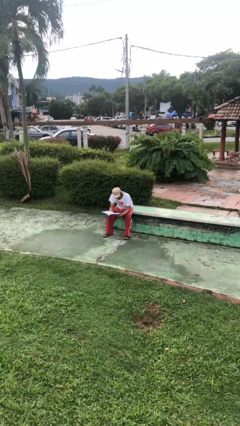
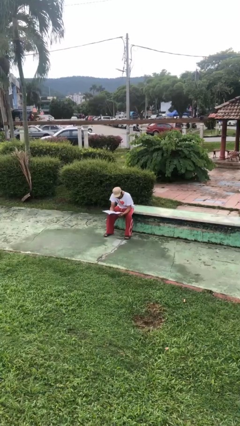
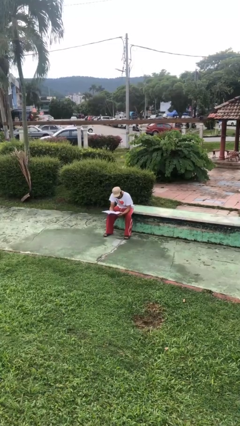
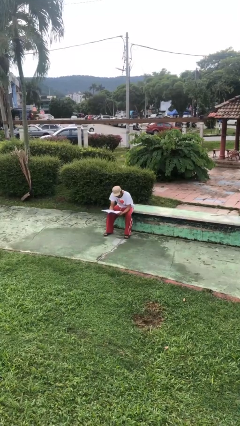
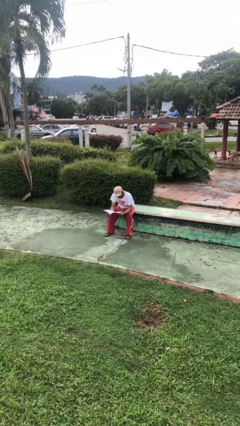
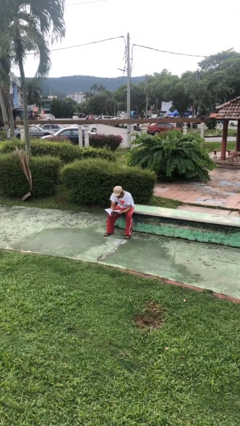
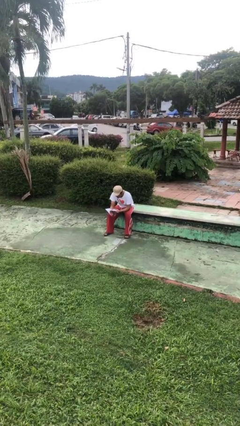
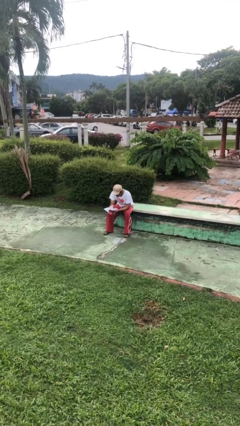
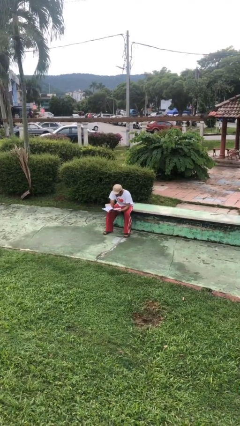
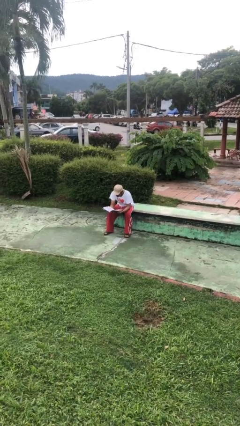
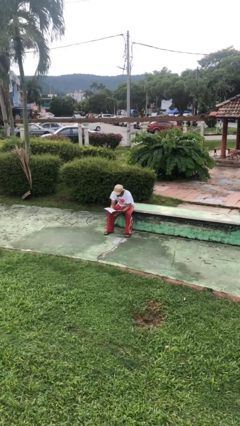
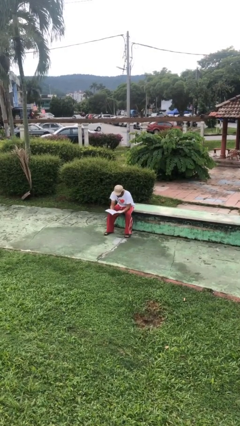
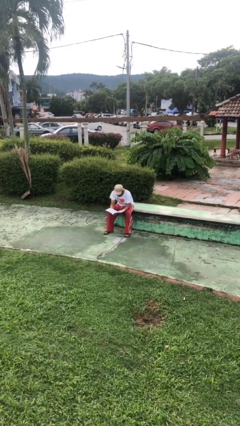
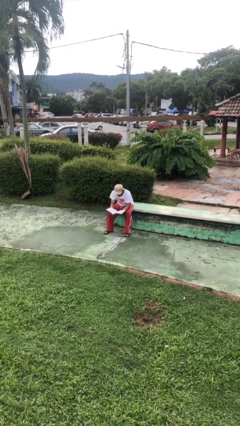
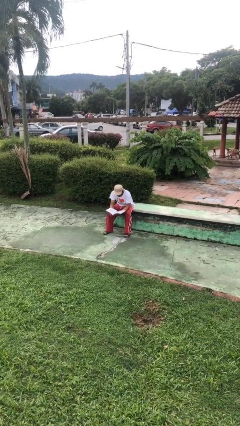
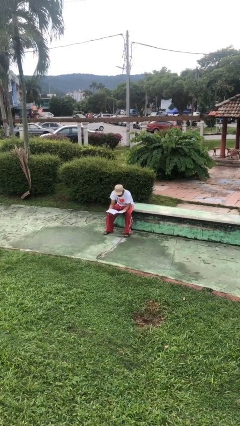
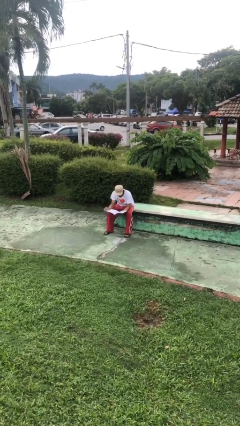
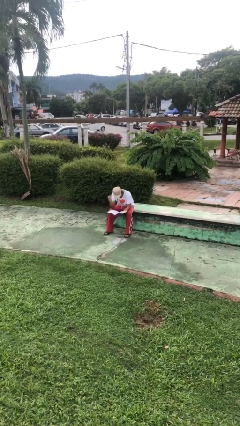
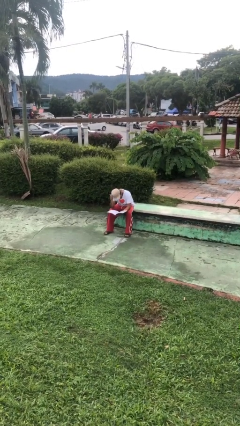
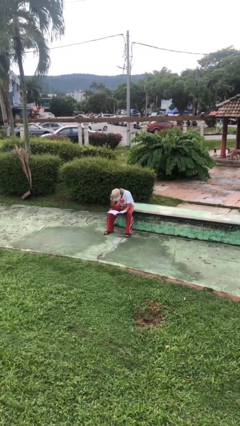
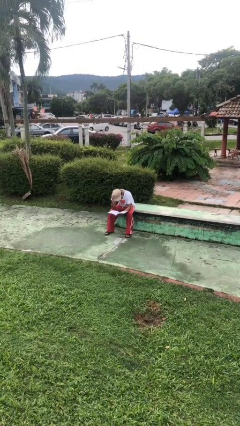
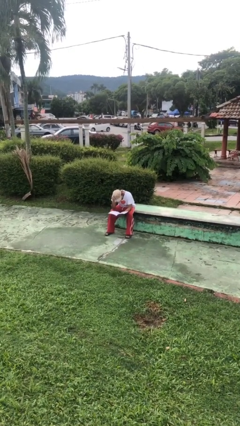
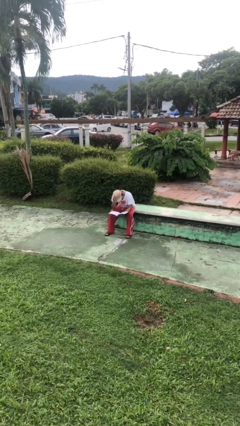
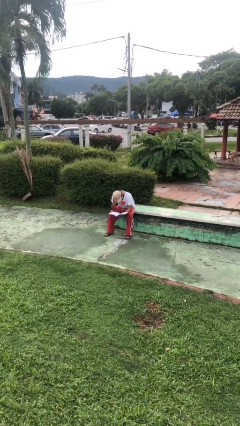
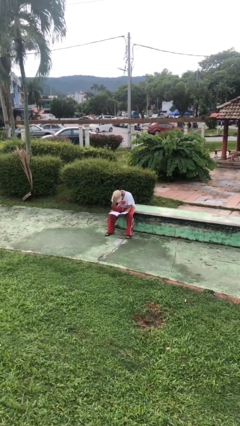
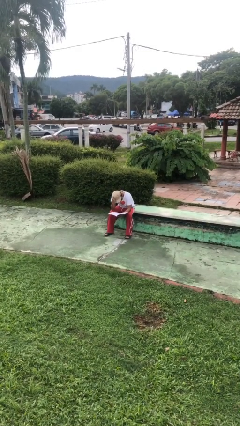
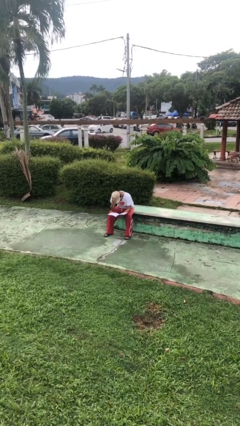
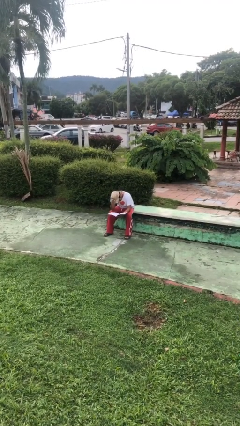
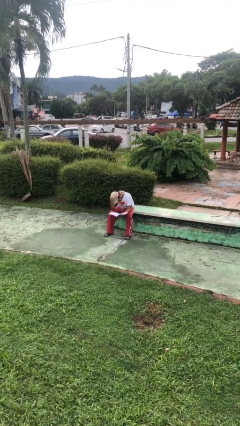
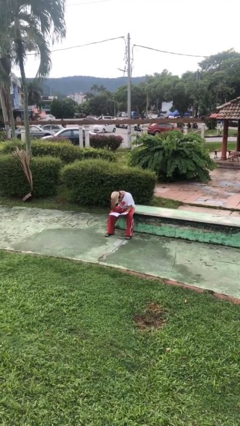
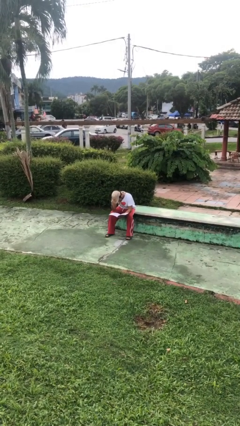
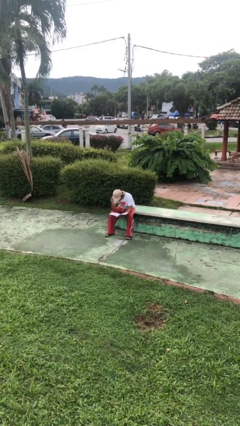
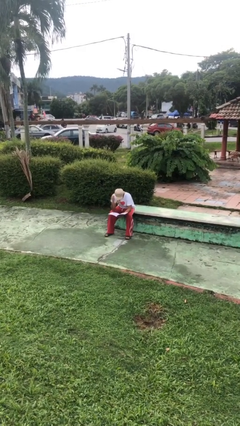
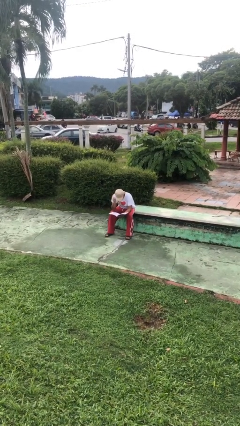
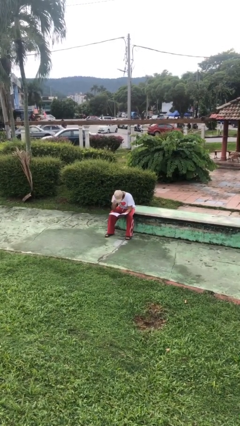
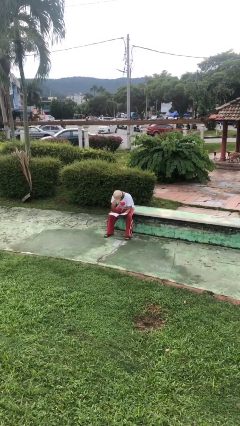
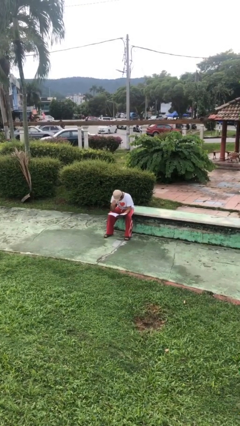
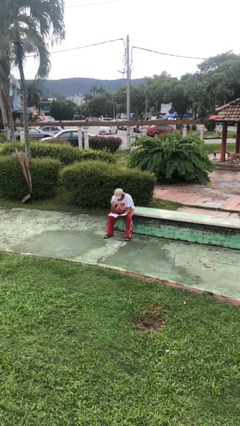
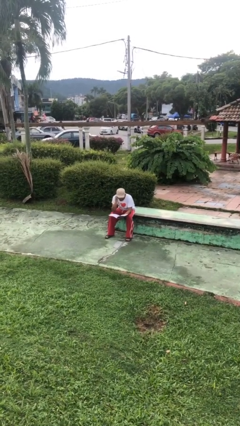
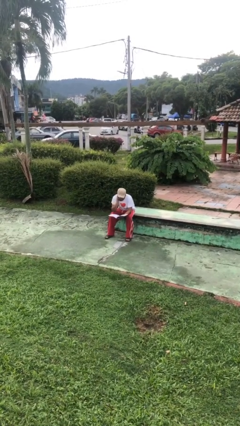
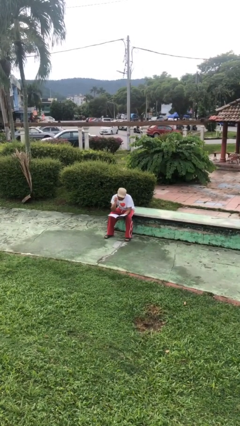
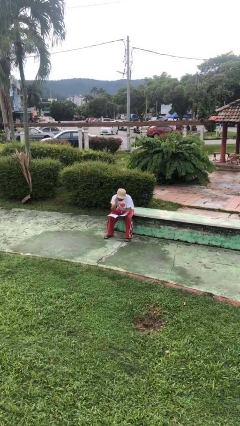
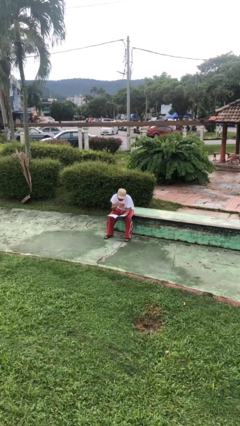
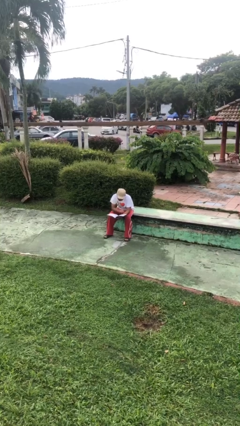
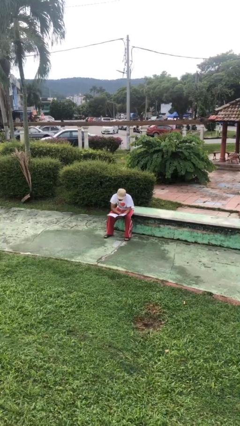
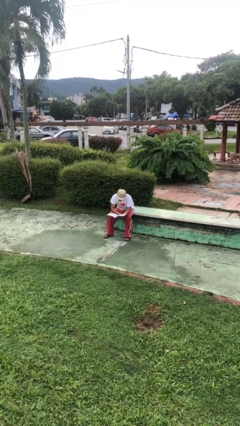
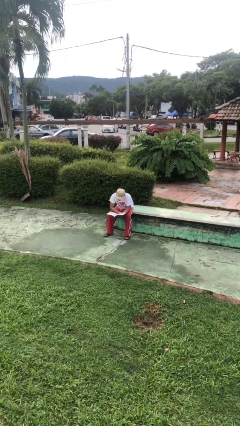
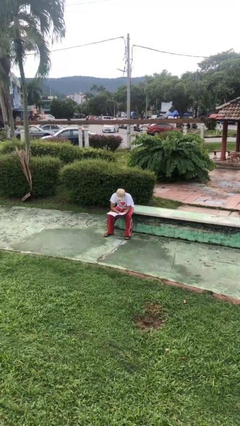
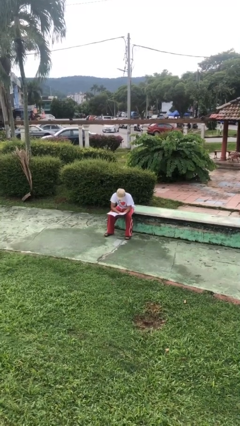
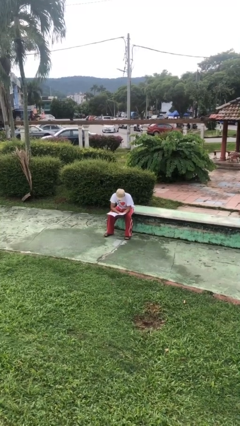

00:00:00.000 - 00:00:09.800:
person reads document

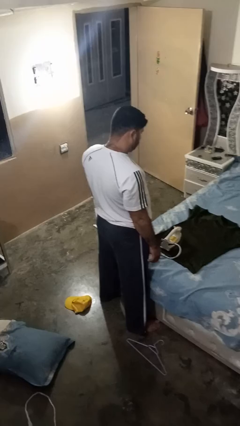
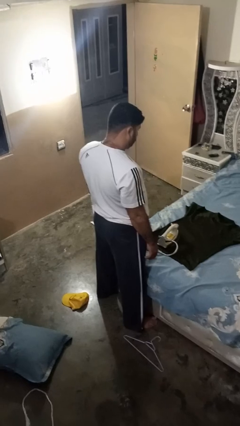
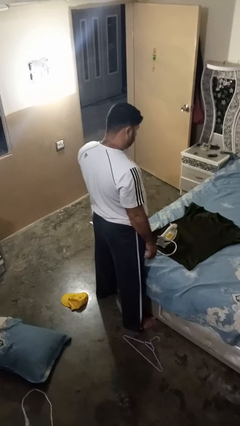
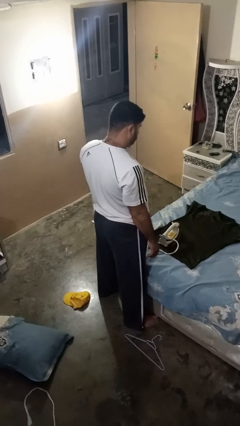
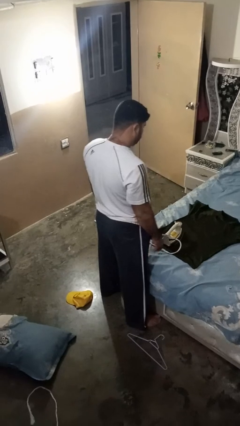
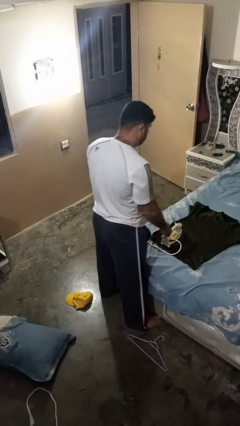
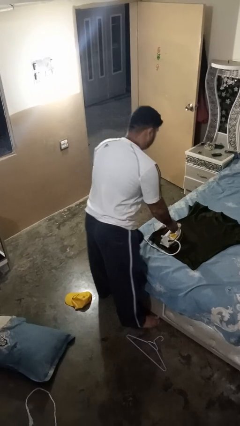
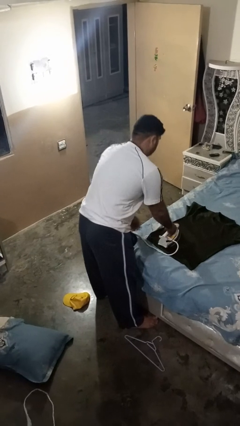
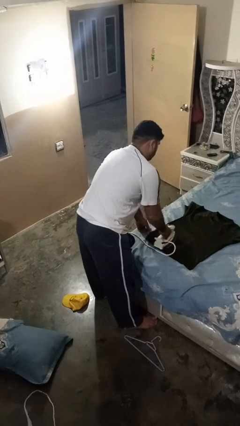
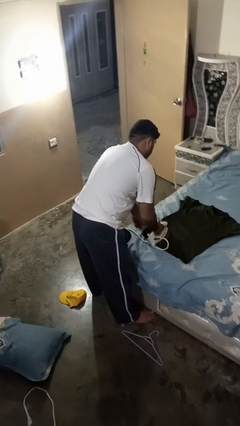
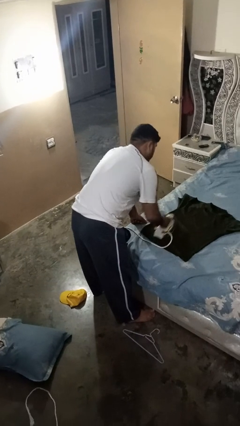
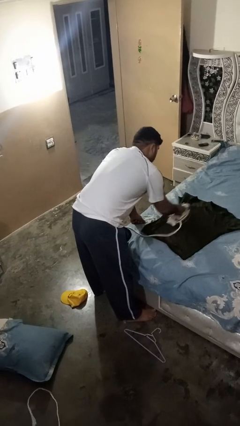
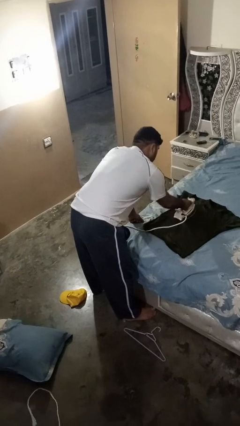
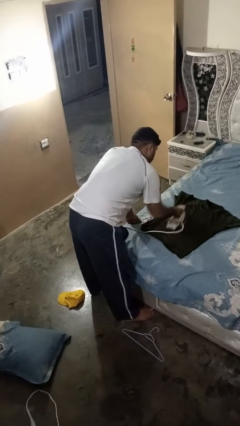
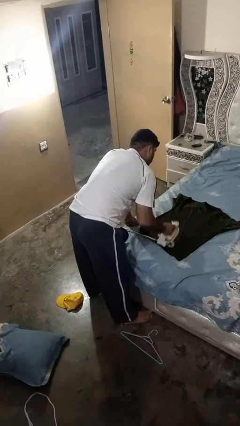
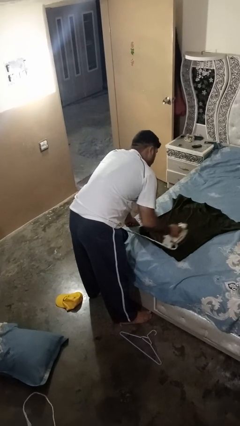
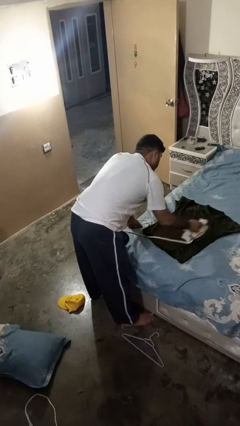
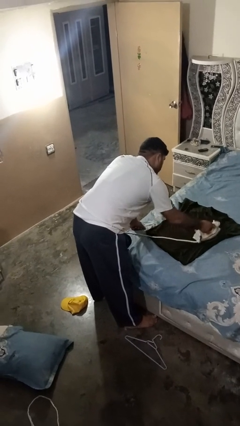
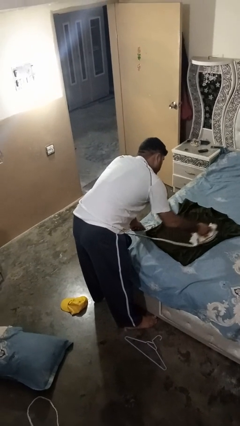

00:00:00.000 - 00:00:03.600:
person irons clothes

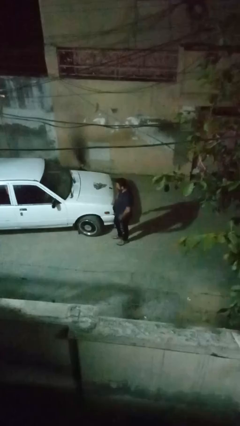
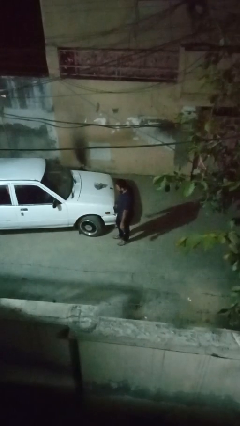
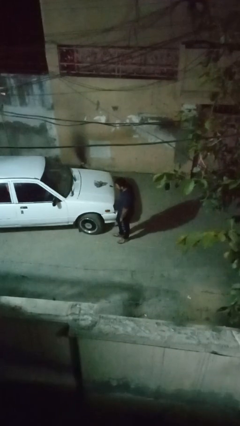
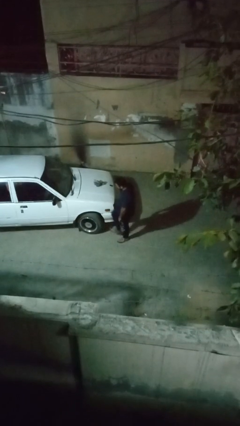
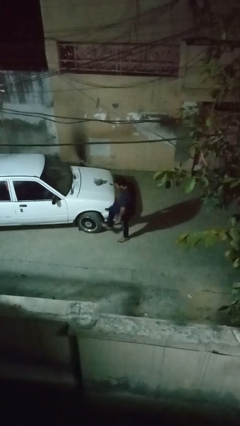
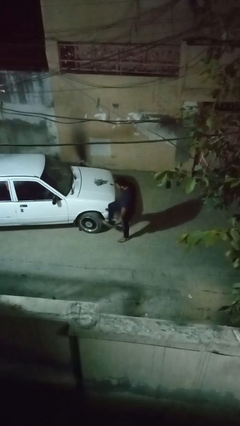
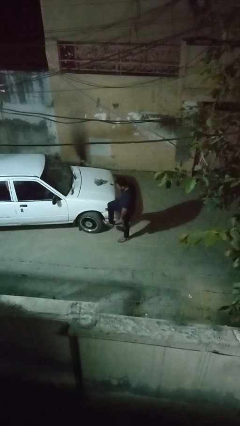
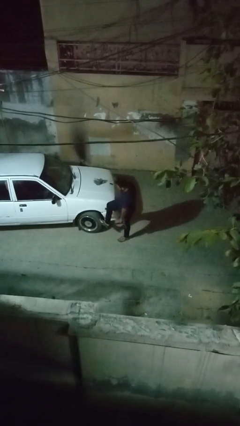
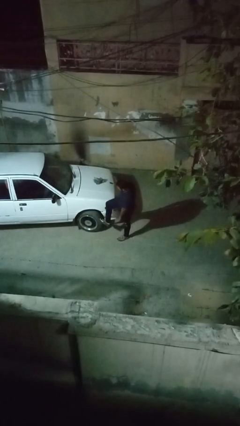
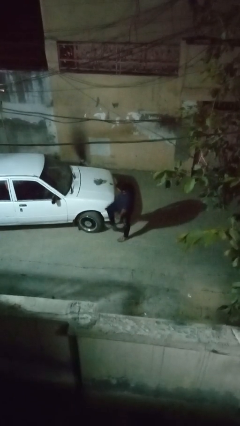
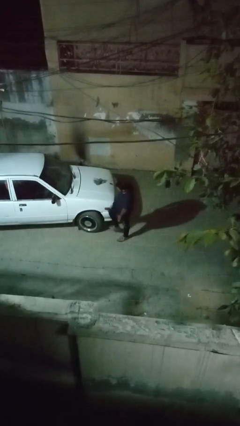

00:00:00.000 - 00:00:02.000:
person kicks car tires

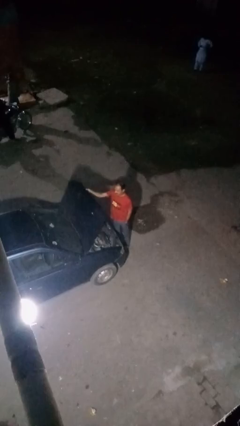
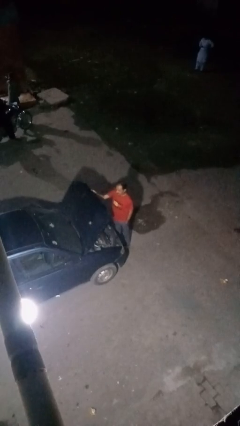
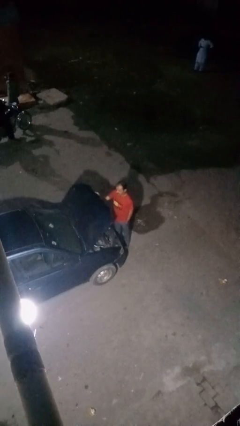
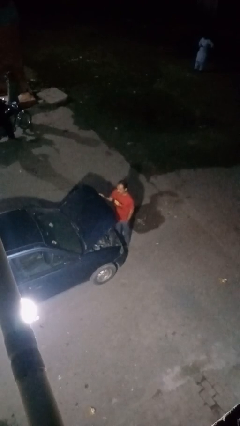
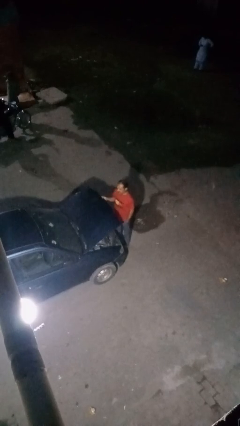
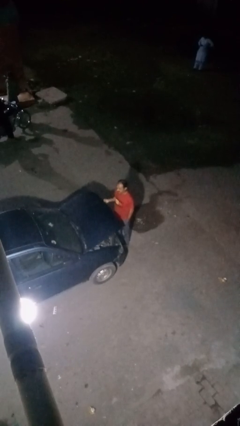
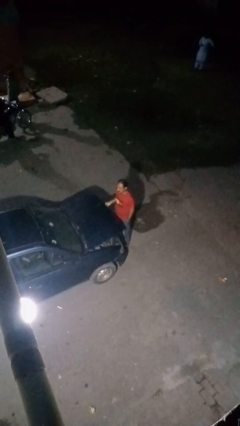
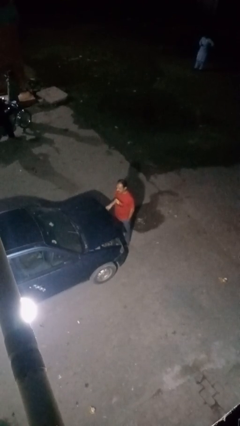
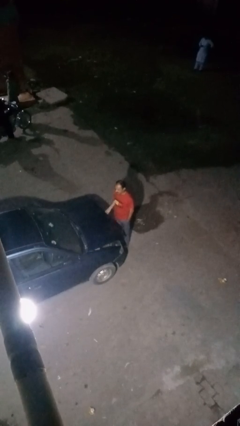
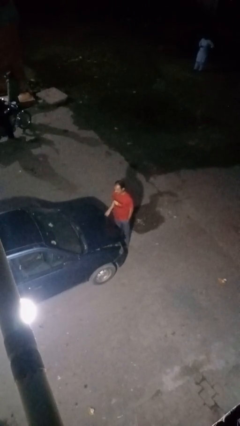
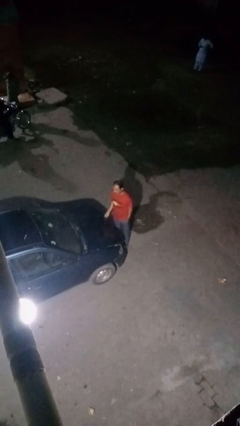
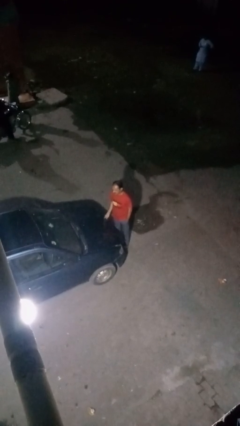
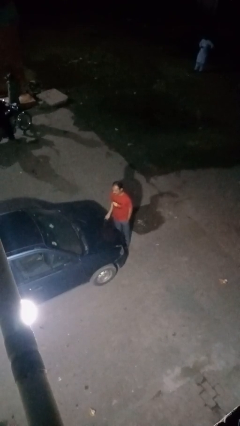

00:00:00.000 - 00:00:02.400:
person closes car hood
